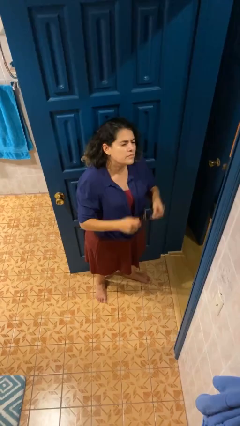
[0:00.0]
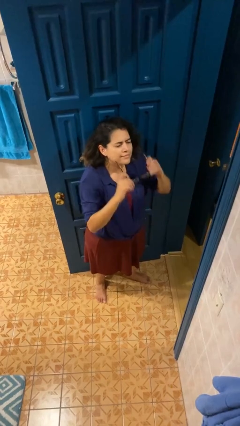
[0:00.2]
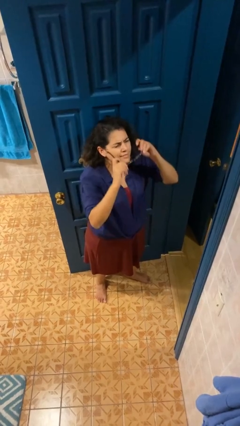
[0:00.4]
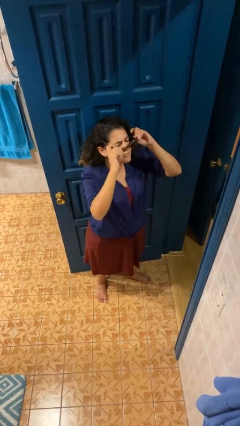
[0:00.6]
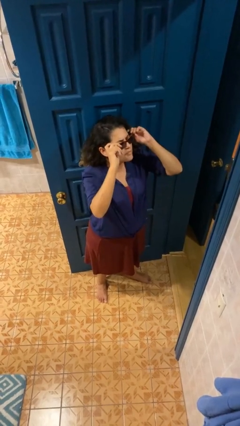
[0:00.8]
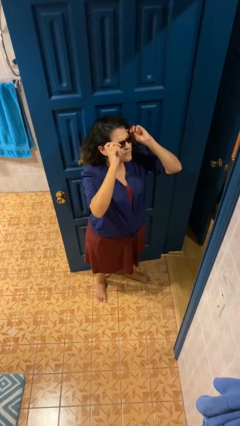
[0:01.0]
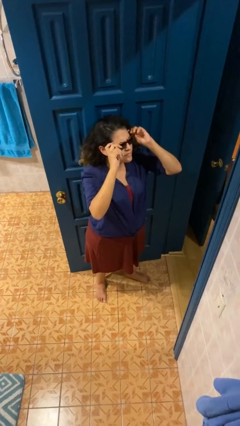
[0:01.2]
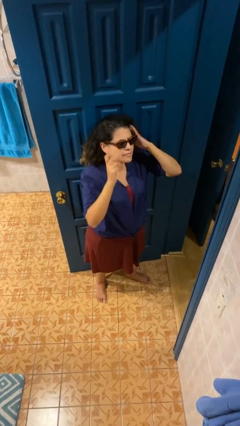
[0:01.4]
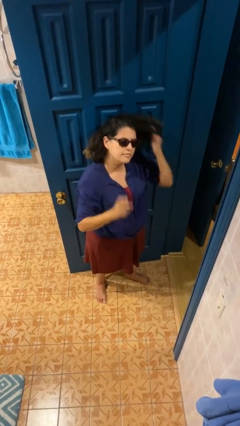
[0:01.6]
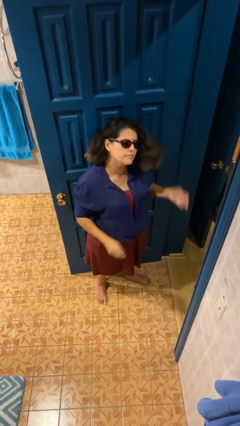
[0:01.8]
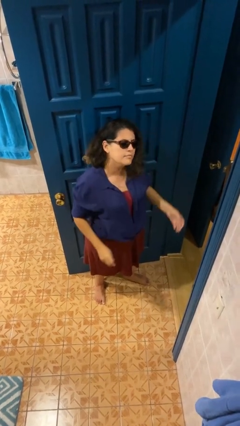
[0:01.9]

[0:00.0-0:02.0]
person puts on sunglasses

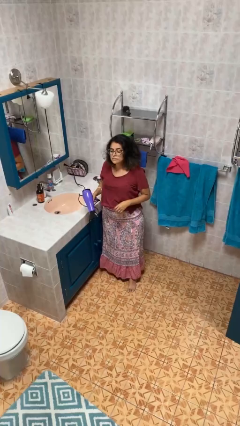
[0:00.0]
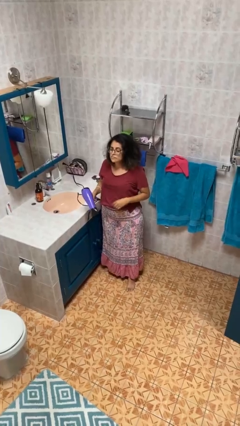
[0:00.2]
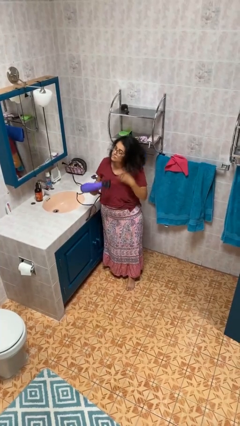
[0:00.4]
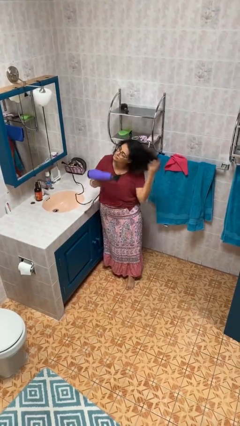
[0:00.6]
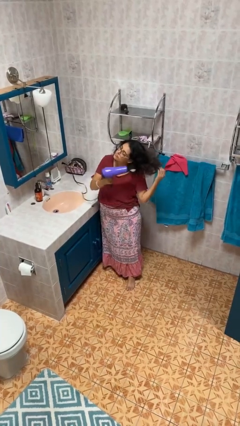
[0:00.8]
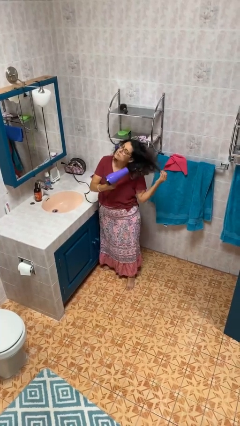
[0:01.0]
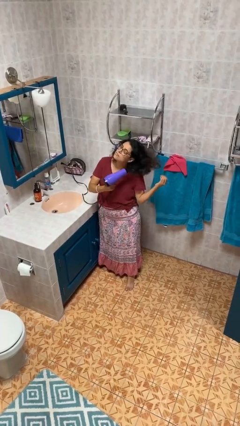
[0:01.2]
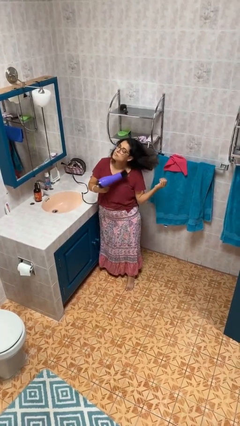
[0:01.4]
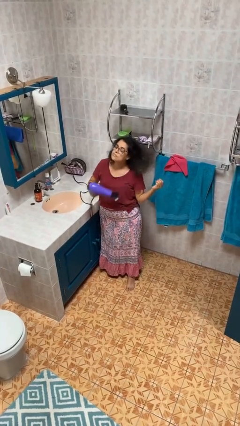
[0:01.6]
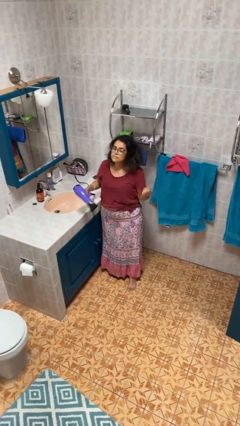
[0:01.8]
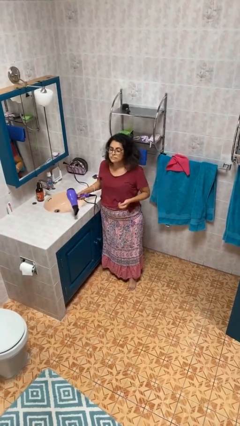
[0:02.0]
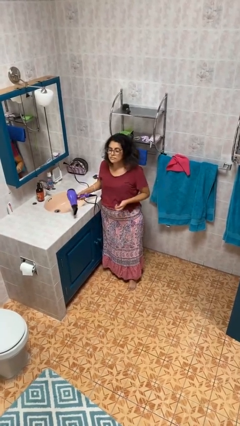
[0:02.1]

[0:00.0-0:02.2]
person dries hair with hairdryer

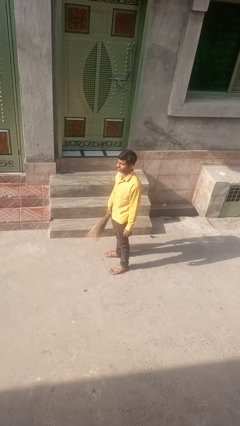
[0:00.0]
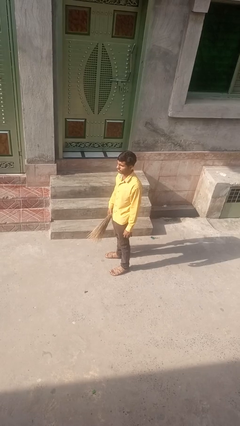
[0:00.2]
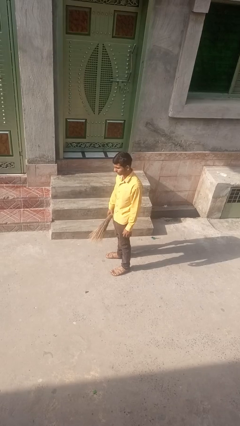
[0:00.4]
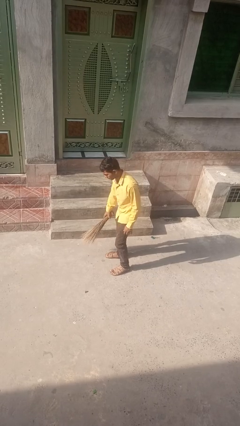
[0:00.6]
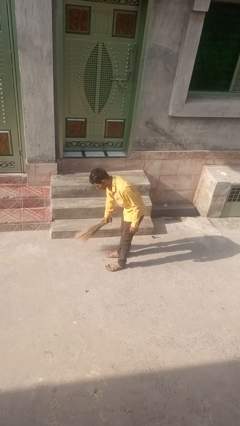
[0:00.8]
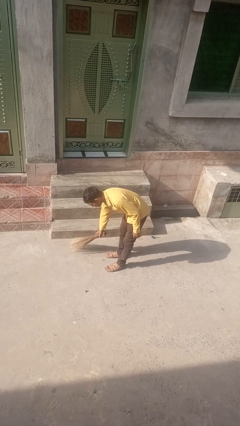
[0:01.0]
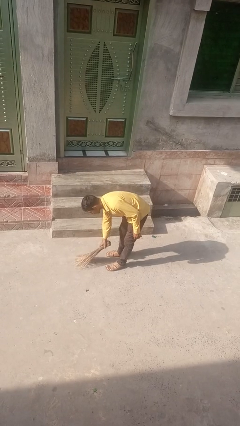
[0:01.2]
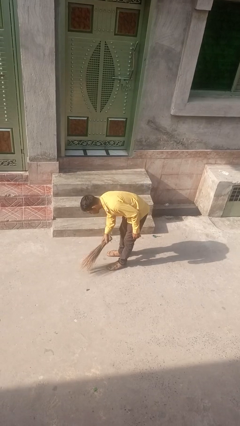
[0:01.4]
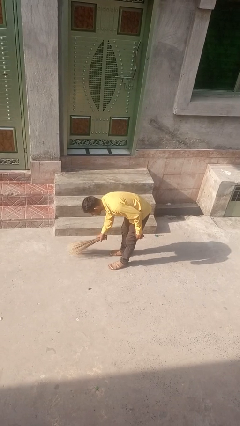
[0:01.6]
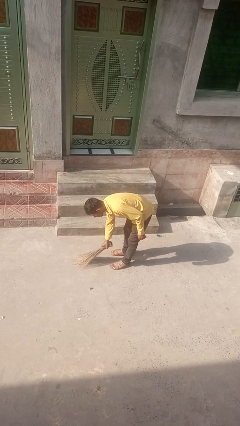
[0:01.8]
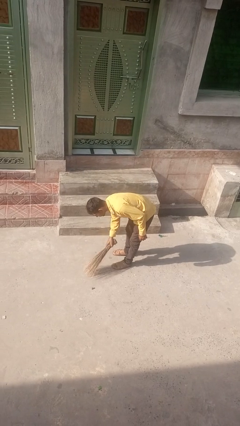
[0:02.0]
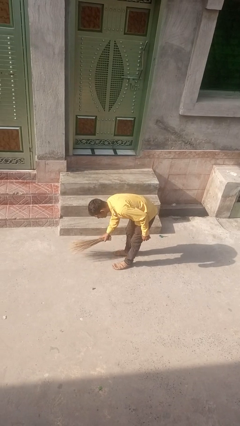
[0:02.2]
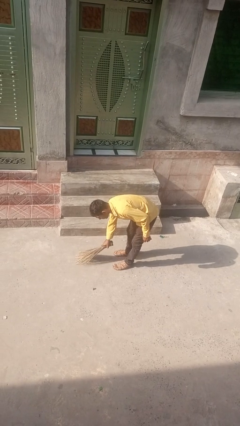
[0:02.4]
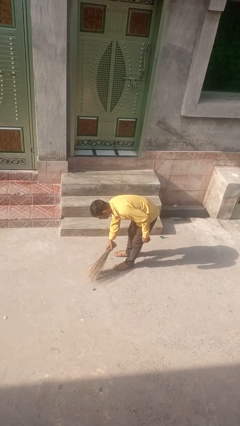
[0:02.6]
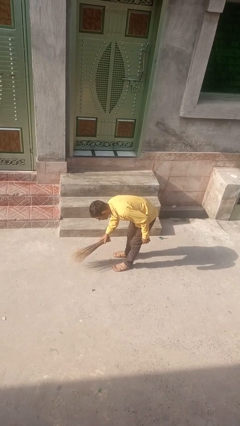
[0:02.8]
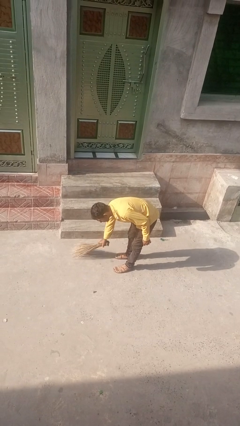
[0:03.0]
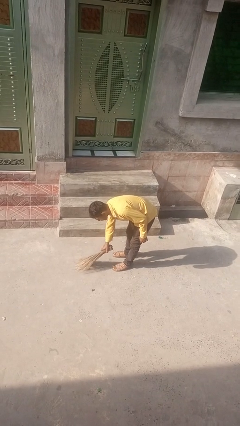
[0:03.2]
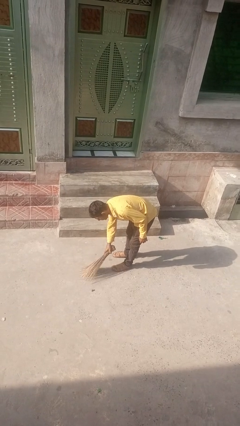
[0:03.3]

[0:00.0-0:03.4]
person sweeps floor

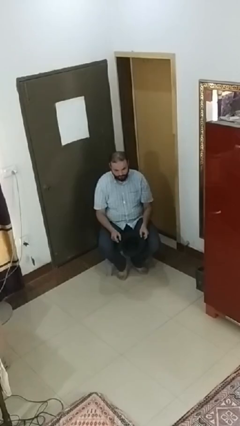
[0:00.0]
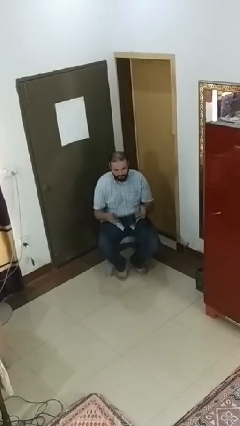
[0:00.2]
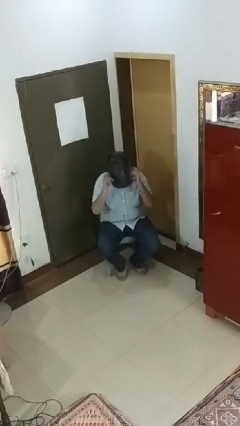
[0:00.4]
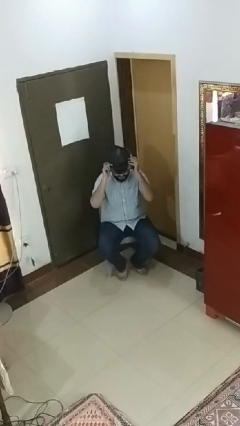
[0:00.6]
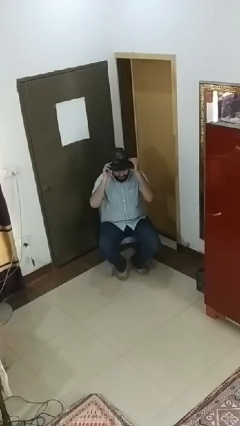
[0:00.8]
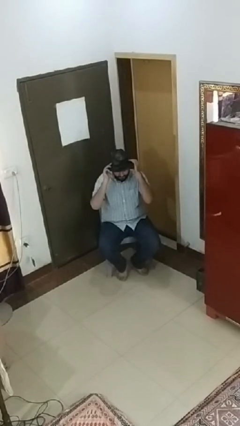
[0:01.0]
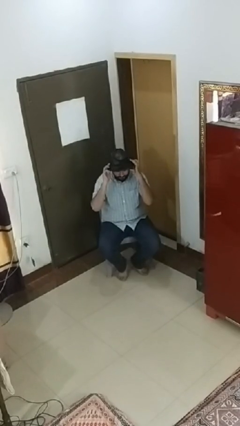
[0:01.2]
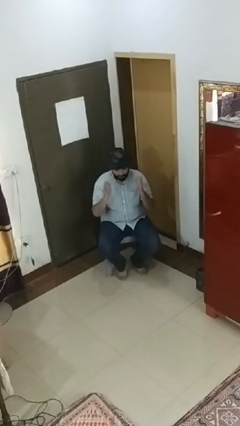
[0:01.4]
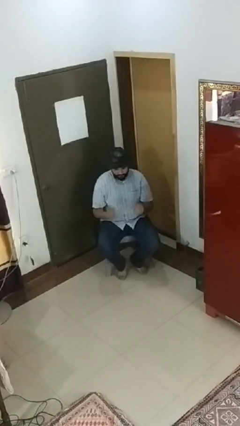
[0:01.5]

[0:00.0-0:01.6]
person puts on hat

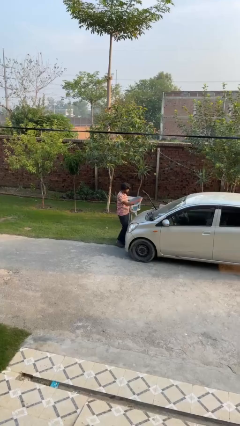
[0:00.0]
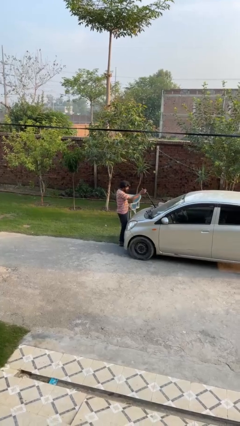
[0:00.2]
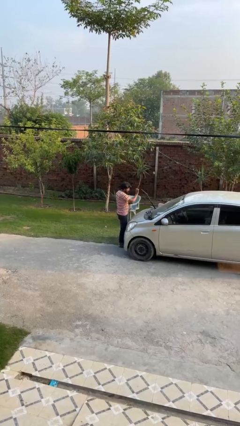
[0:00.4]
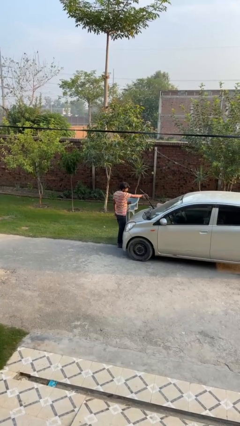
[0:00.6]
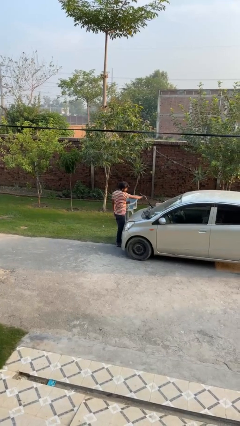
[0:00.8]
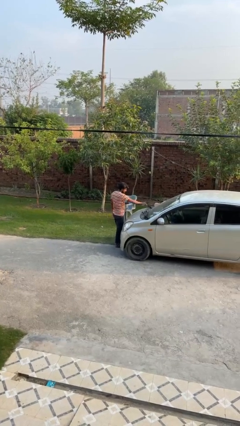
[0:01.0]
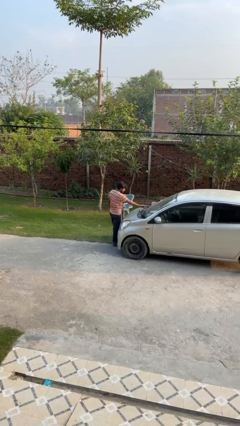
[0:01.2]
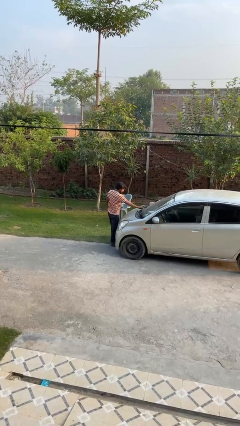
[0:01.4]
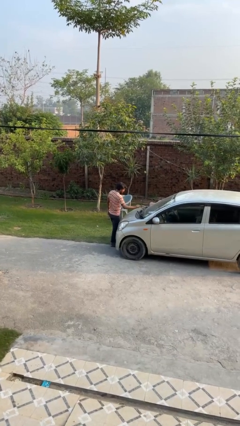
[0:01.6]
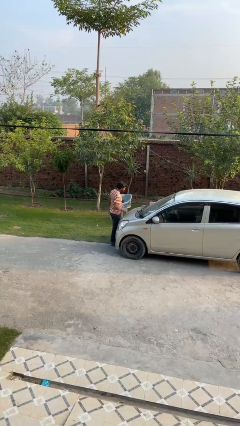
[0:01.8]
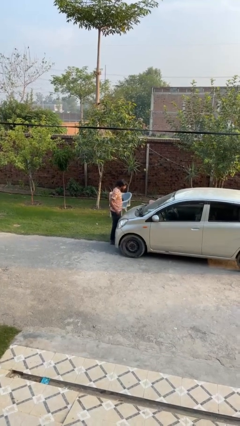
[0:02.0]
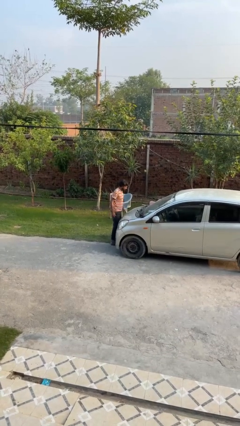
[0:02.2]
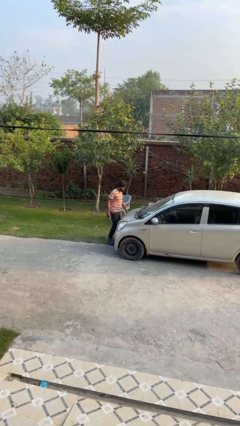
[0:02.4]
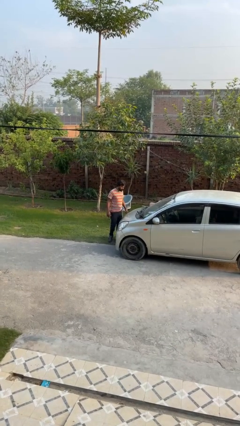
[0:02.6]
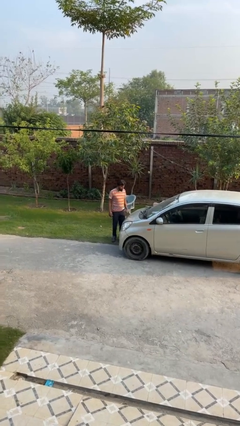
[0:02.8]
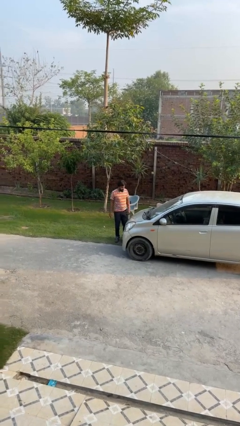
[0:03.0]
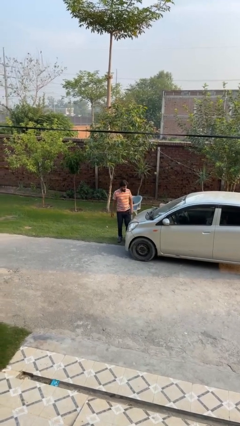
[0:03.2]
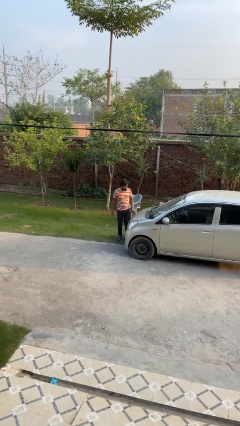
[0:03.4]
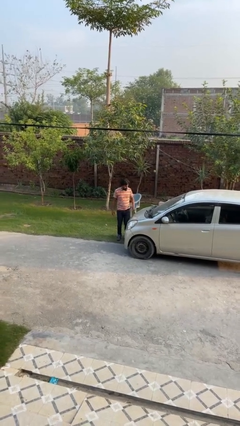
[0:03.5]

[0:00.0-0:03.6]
person flips down car wipers

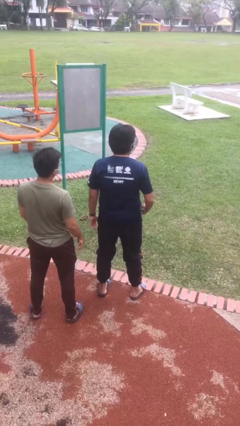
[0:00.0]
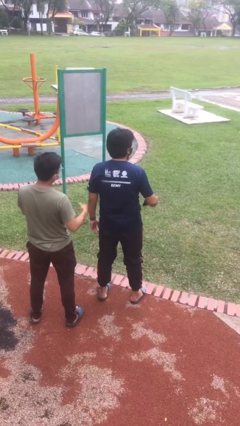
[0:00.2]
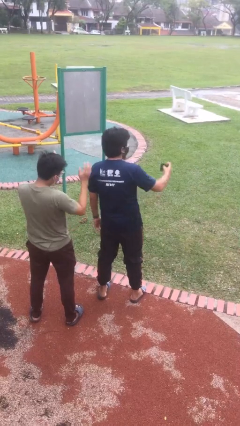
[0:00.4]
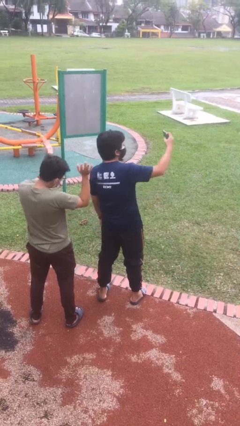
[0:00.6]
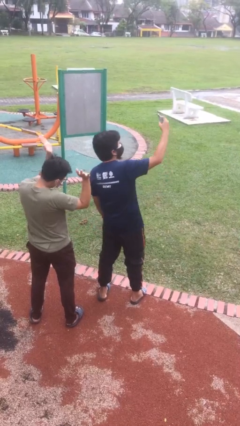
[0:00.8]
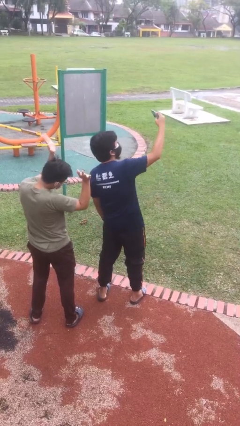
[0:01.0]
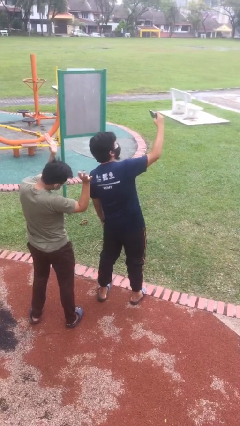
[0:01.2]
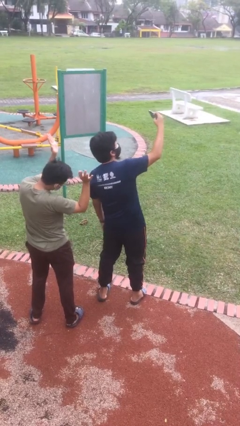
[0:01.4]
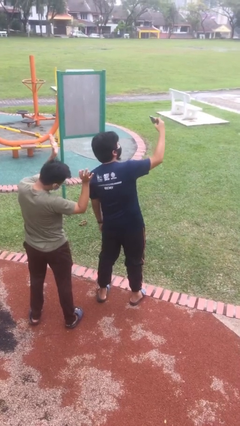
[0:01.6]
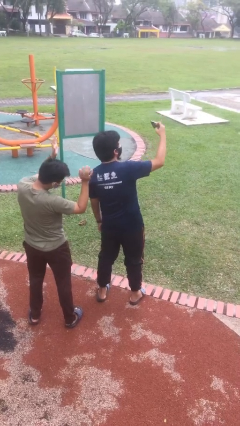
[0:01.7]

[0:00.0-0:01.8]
person takes selfie with person

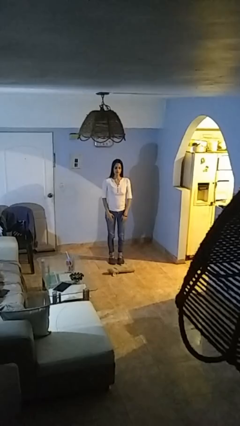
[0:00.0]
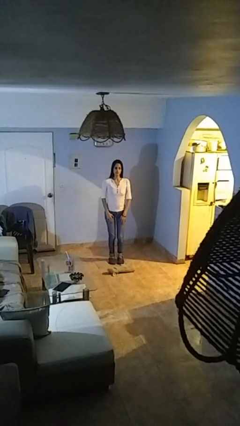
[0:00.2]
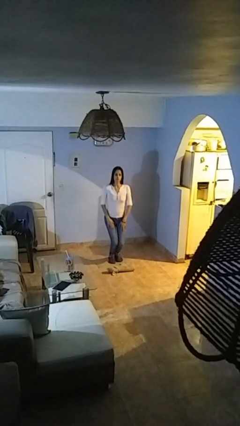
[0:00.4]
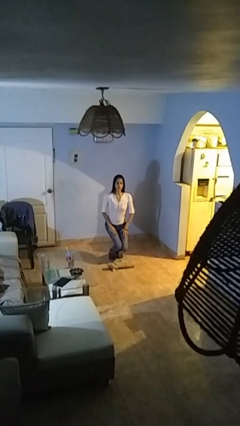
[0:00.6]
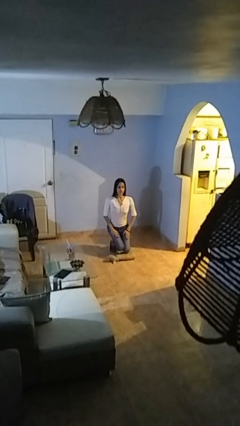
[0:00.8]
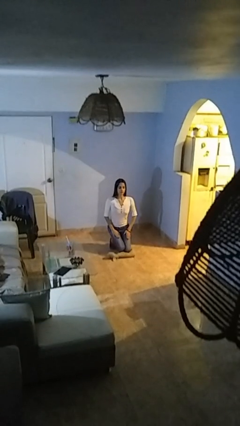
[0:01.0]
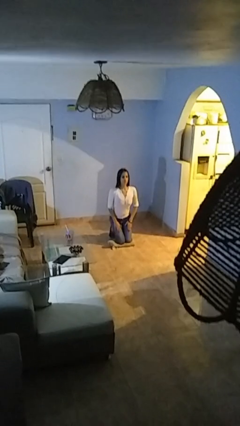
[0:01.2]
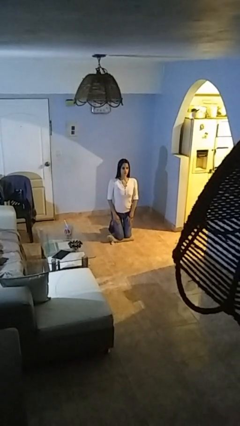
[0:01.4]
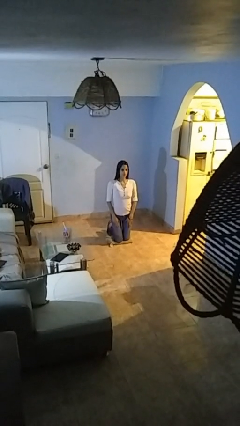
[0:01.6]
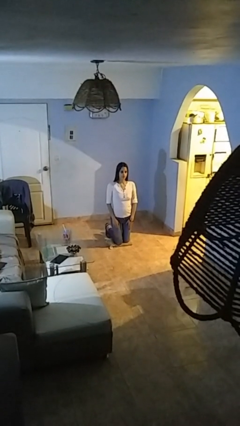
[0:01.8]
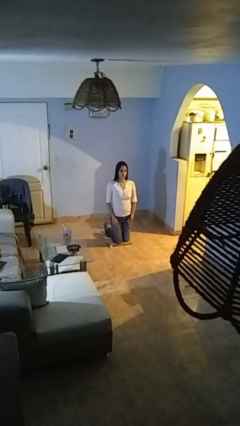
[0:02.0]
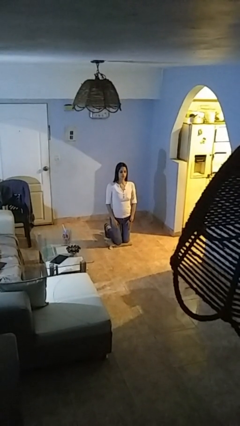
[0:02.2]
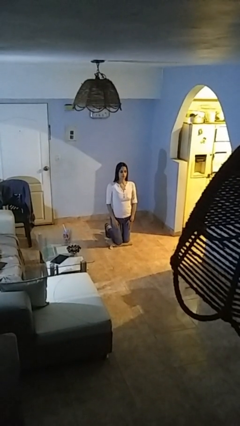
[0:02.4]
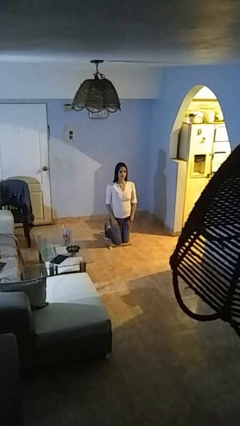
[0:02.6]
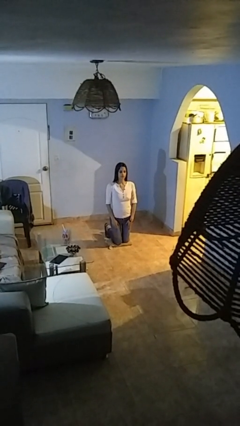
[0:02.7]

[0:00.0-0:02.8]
person kneels
